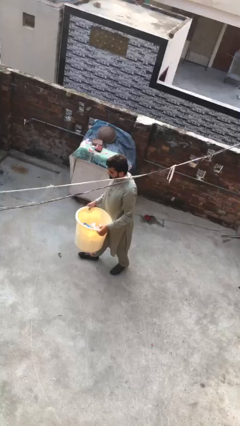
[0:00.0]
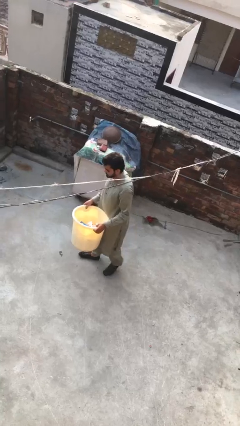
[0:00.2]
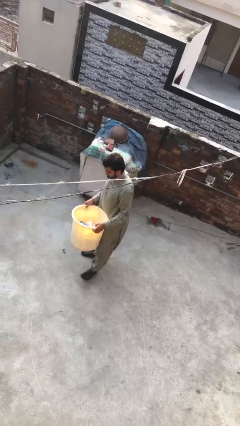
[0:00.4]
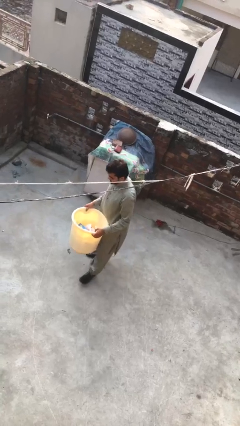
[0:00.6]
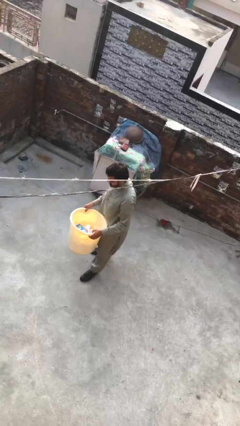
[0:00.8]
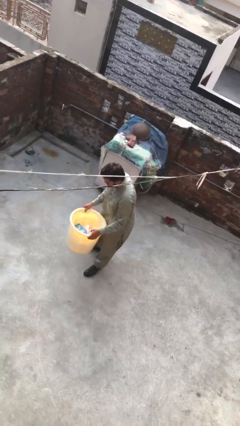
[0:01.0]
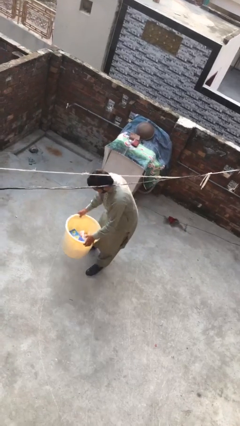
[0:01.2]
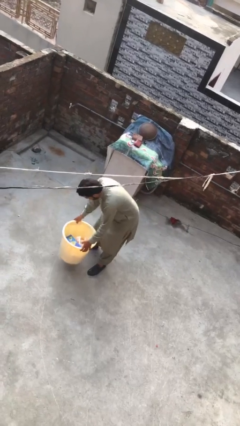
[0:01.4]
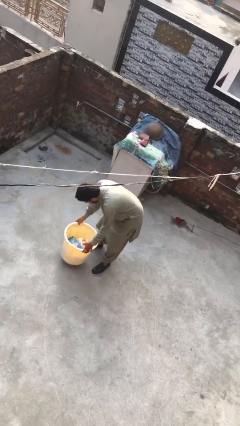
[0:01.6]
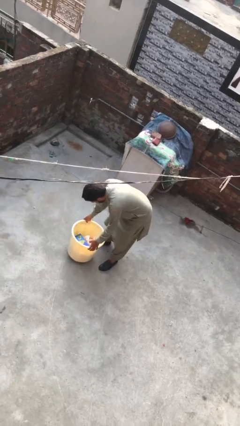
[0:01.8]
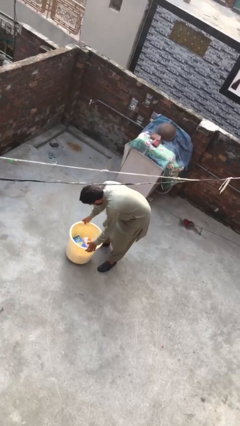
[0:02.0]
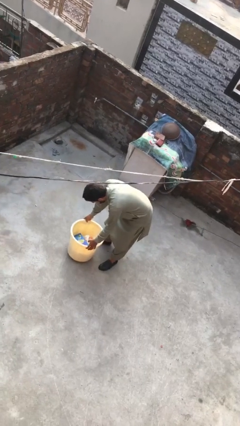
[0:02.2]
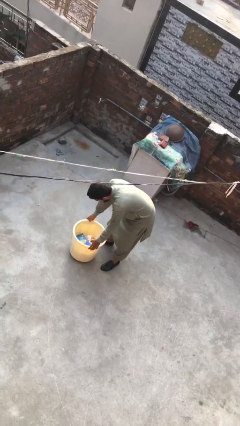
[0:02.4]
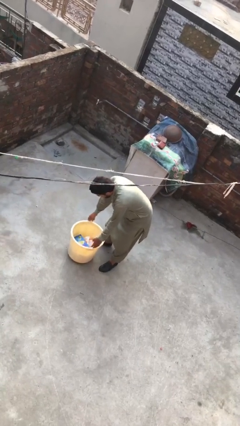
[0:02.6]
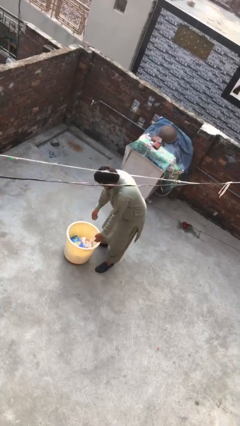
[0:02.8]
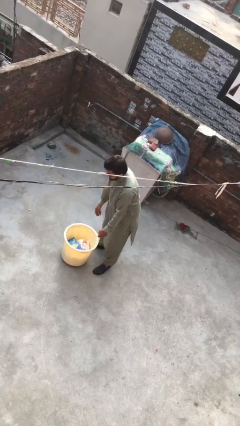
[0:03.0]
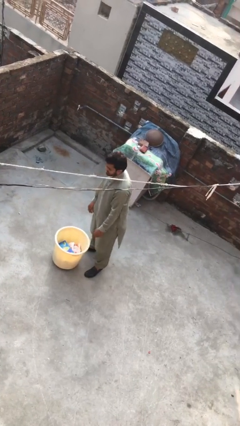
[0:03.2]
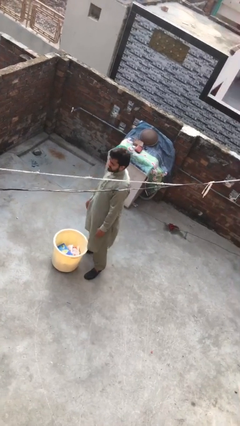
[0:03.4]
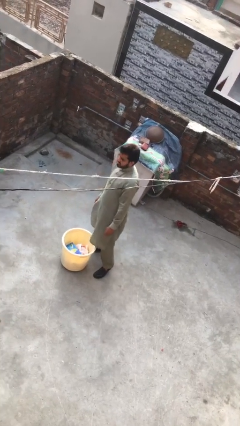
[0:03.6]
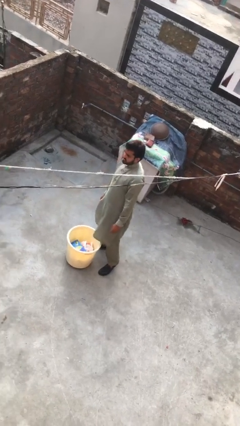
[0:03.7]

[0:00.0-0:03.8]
person puts down object on floor

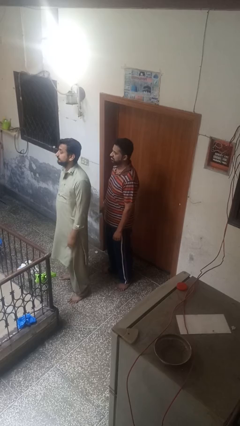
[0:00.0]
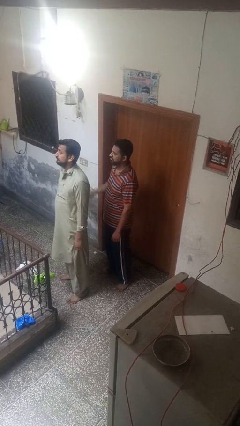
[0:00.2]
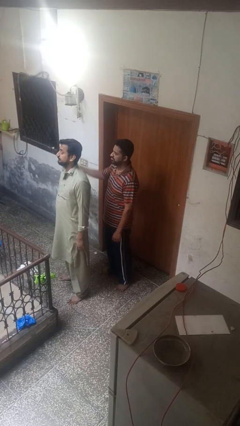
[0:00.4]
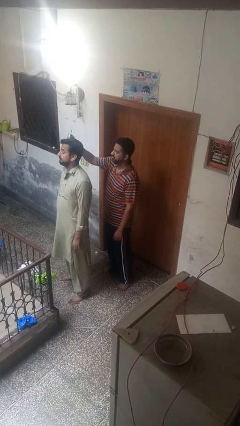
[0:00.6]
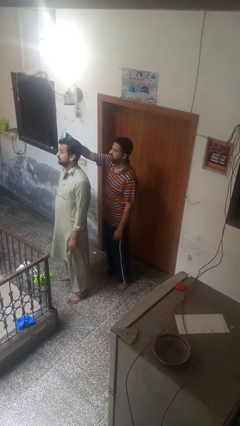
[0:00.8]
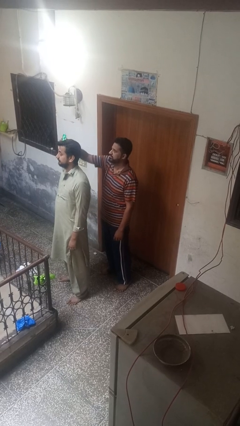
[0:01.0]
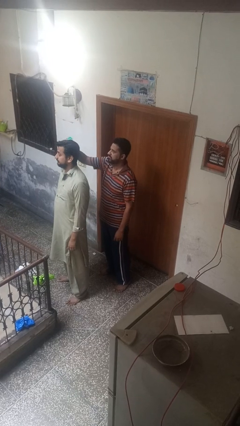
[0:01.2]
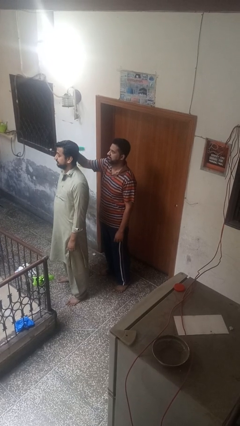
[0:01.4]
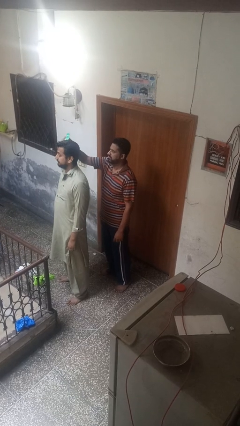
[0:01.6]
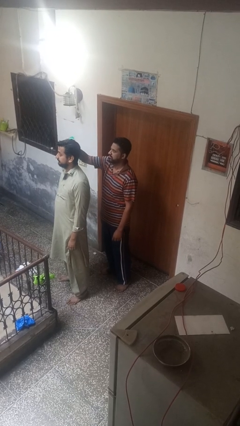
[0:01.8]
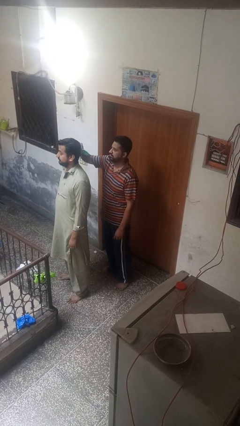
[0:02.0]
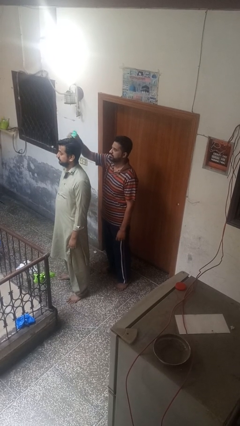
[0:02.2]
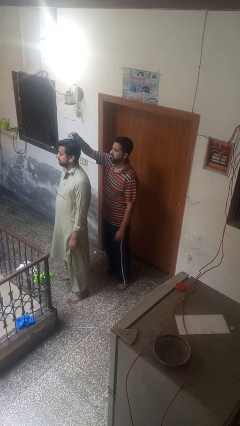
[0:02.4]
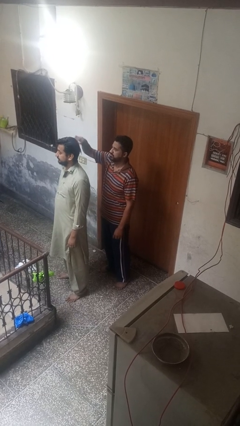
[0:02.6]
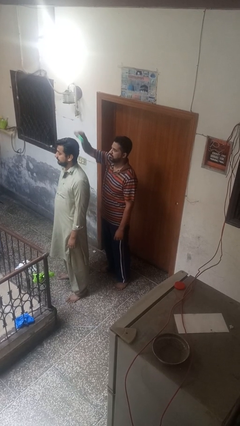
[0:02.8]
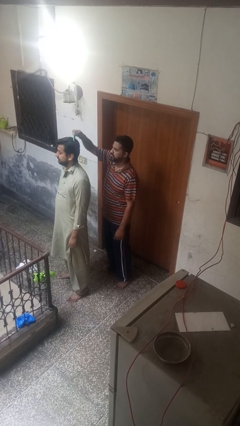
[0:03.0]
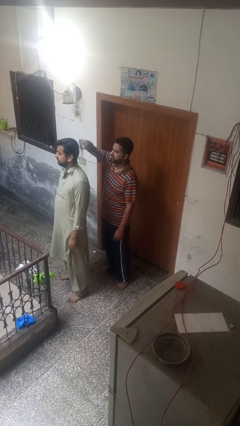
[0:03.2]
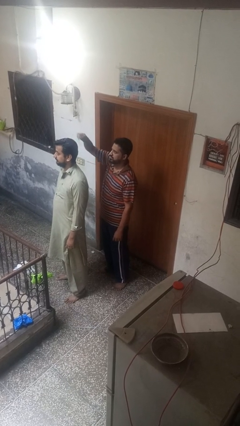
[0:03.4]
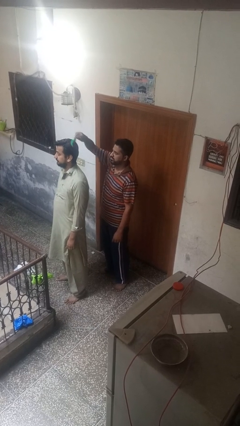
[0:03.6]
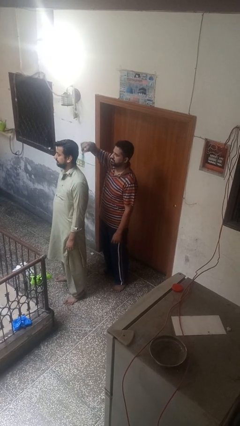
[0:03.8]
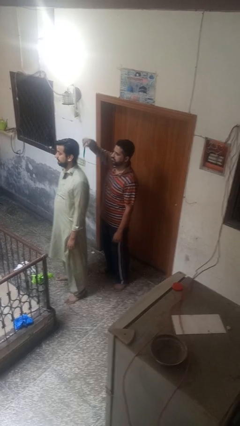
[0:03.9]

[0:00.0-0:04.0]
person brushes hair of person

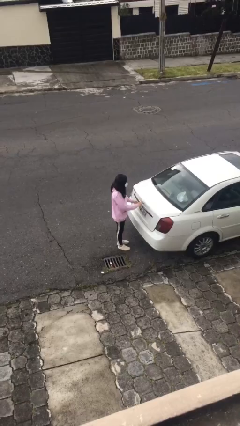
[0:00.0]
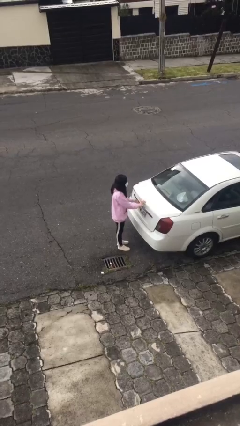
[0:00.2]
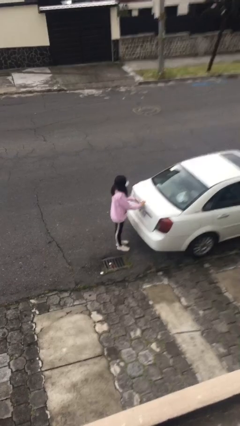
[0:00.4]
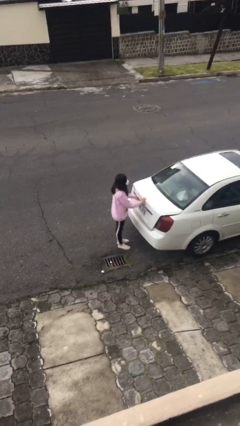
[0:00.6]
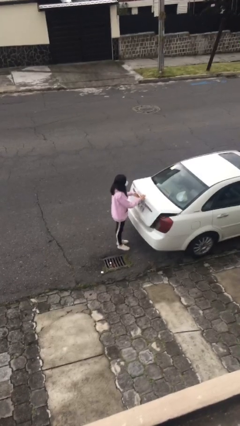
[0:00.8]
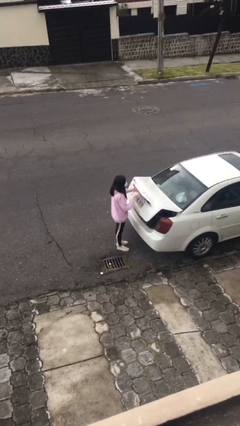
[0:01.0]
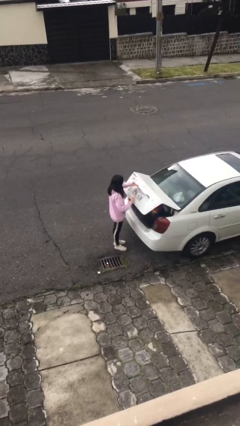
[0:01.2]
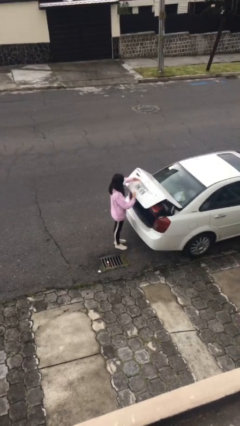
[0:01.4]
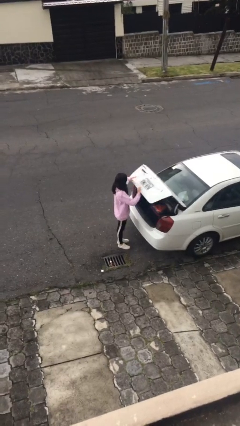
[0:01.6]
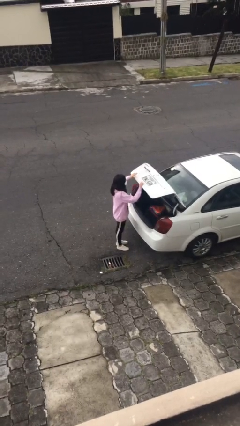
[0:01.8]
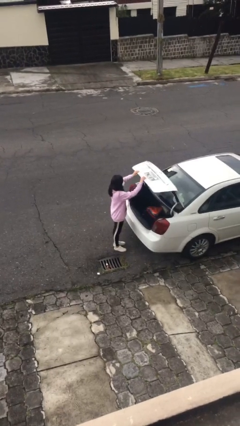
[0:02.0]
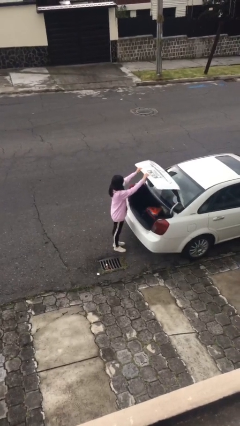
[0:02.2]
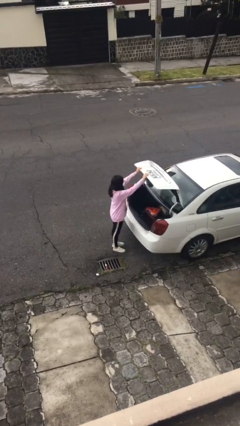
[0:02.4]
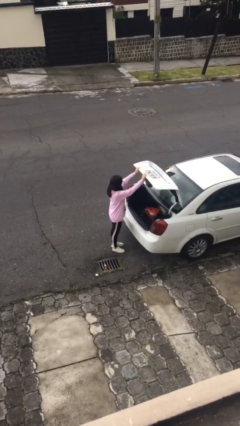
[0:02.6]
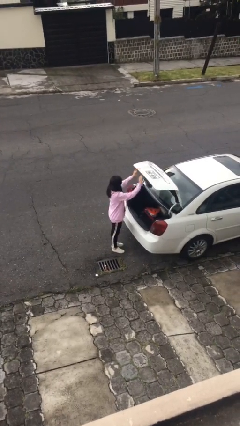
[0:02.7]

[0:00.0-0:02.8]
person opens car trunk

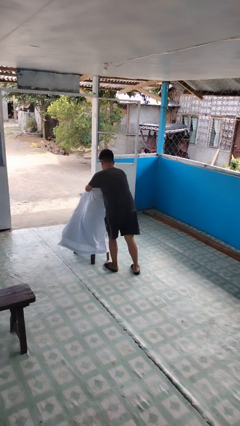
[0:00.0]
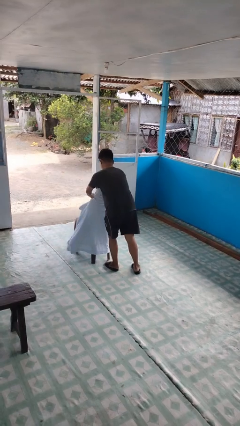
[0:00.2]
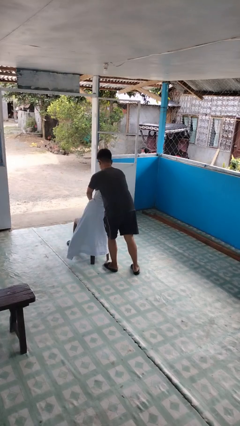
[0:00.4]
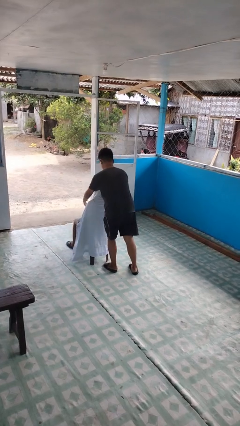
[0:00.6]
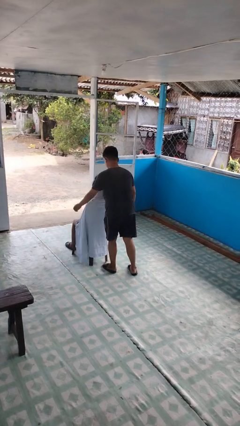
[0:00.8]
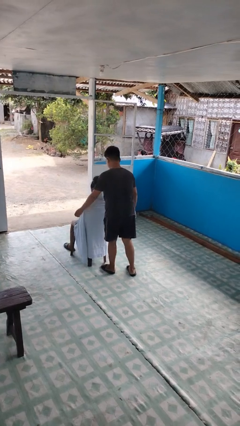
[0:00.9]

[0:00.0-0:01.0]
person covers friend with blanket

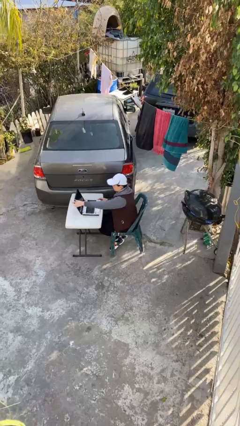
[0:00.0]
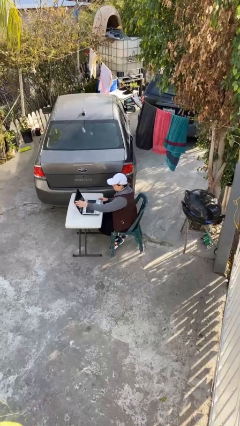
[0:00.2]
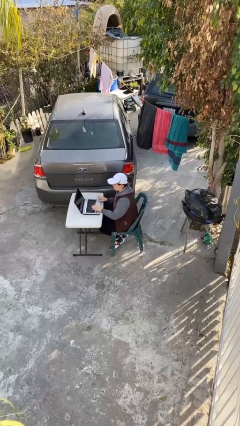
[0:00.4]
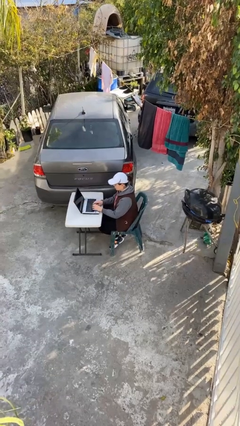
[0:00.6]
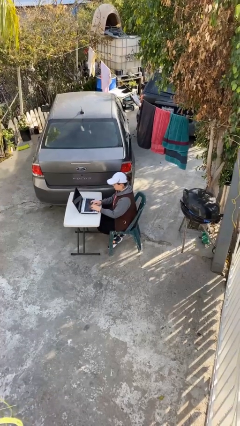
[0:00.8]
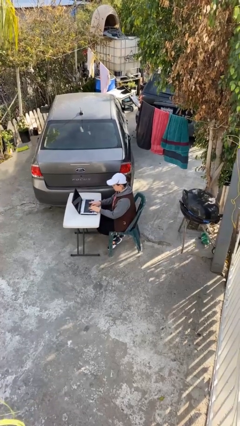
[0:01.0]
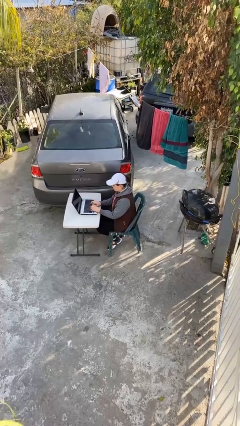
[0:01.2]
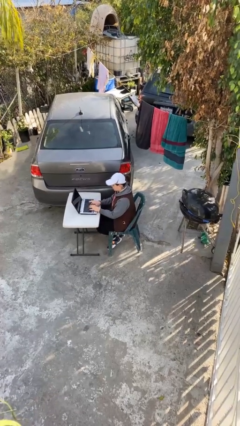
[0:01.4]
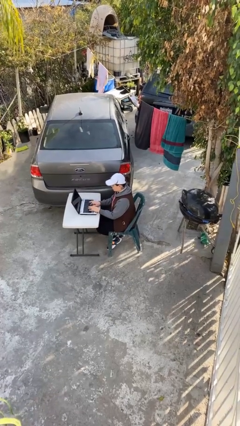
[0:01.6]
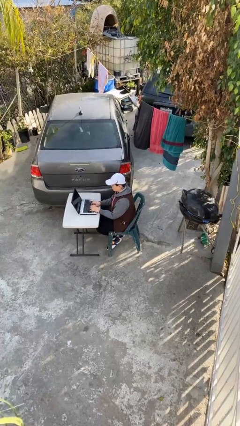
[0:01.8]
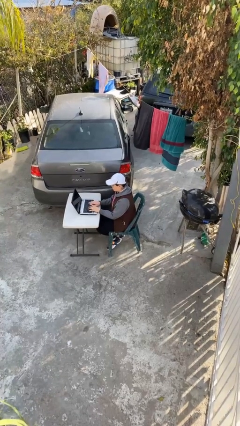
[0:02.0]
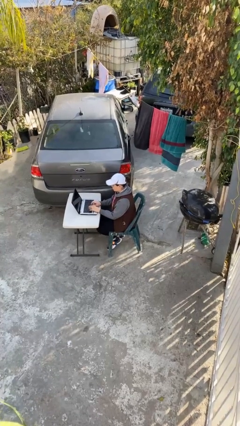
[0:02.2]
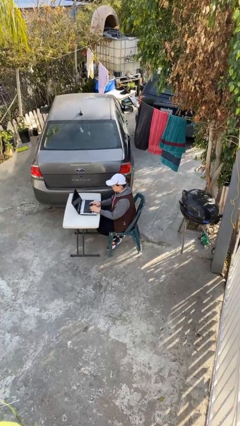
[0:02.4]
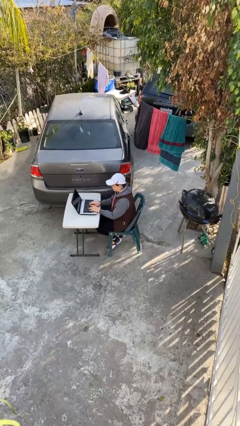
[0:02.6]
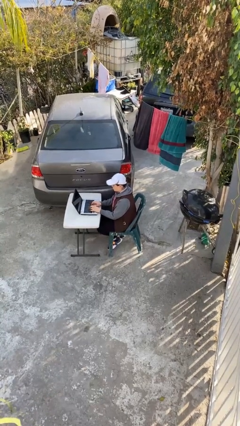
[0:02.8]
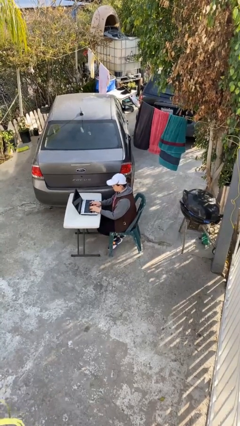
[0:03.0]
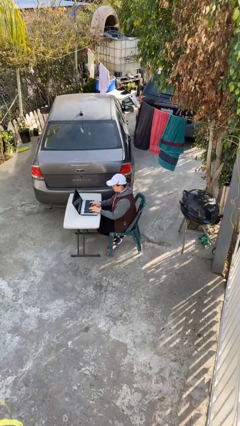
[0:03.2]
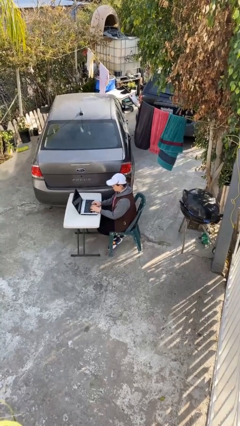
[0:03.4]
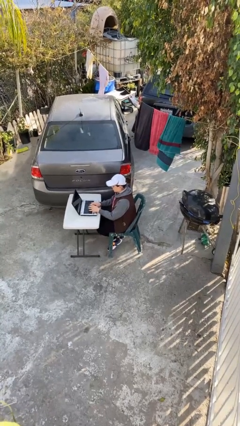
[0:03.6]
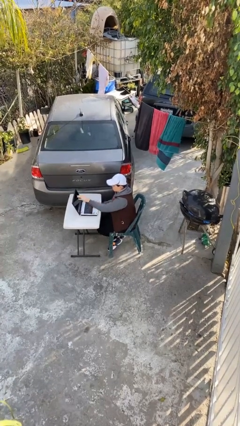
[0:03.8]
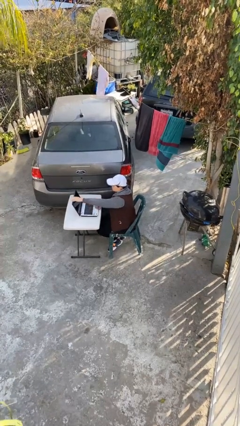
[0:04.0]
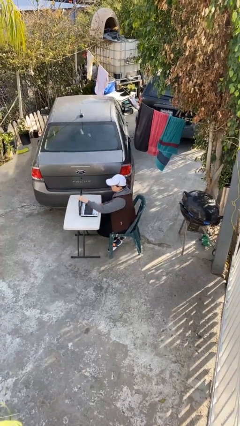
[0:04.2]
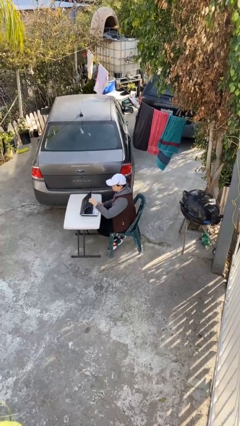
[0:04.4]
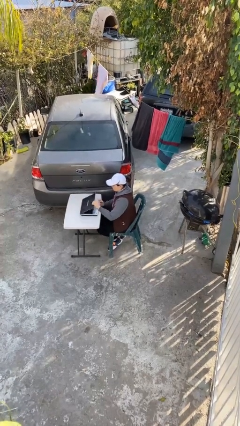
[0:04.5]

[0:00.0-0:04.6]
person interacts with laptop

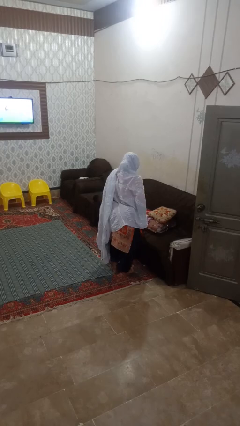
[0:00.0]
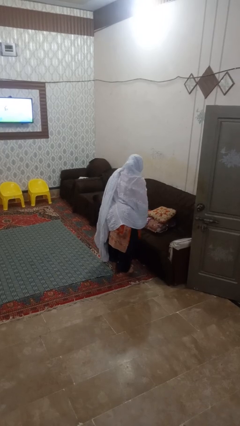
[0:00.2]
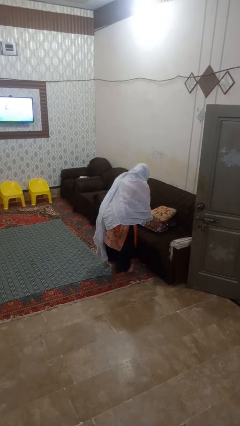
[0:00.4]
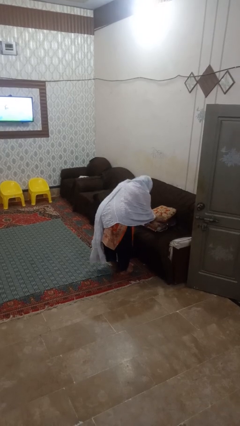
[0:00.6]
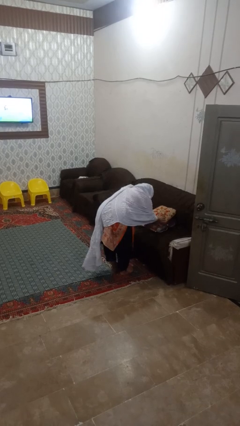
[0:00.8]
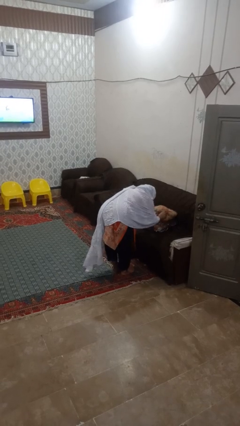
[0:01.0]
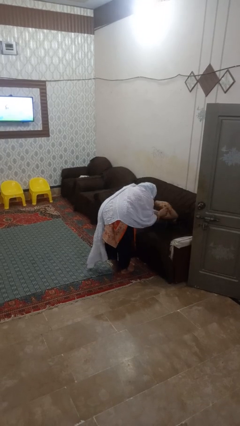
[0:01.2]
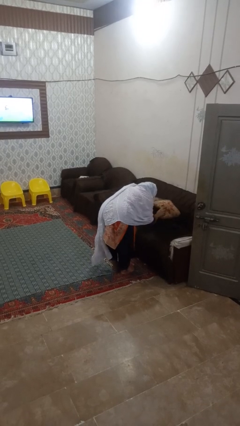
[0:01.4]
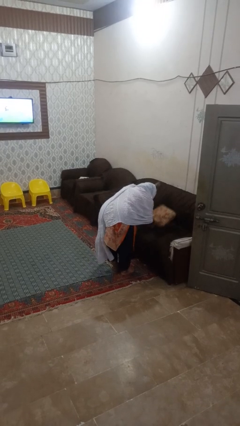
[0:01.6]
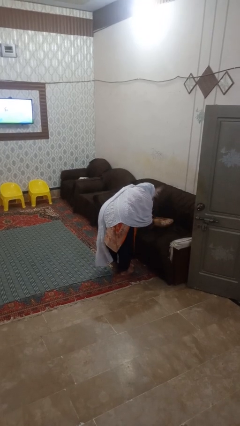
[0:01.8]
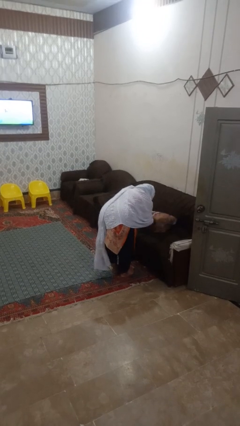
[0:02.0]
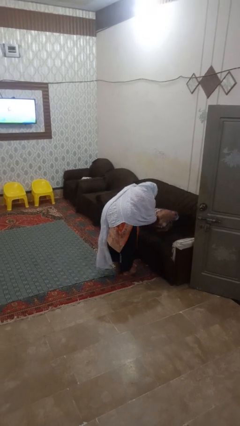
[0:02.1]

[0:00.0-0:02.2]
person searches in couch
